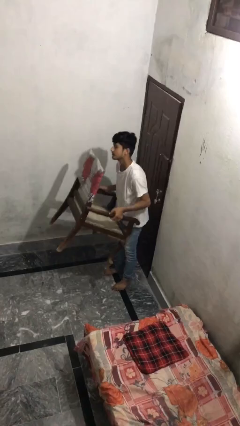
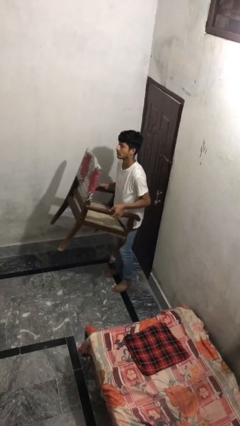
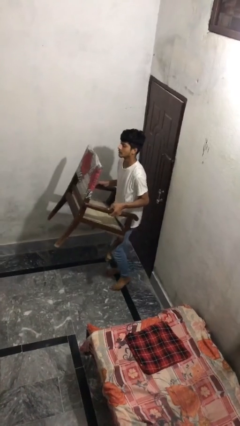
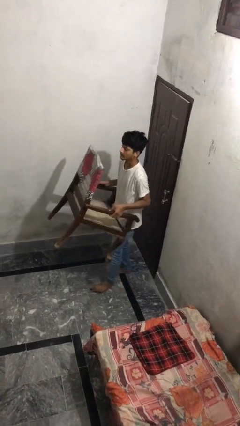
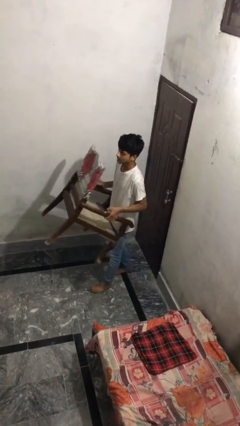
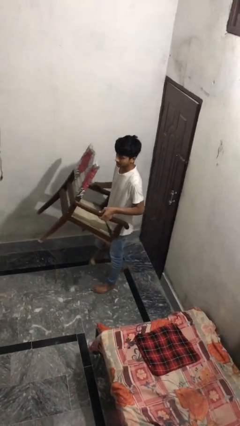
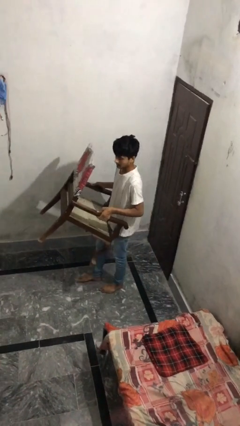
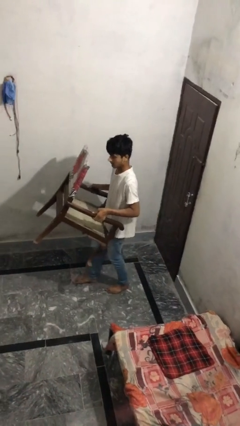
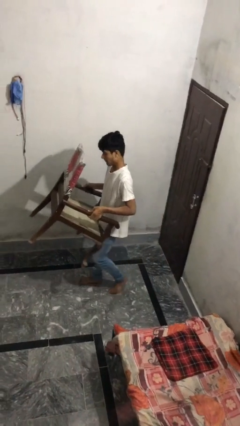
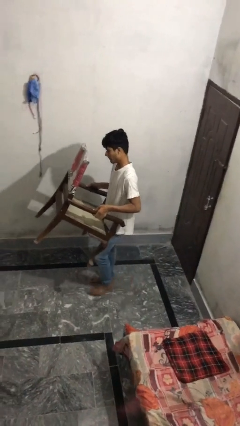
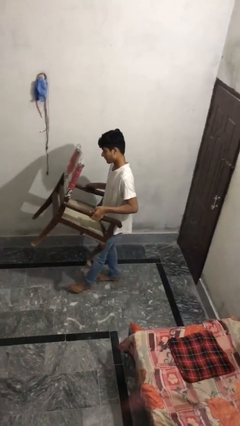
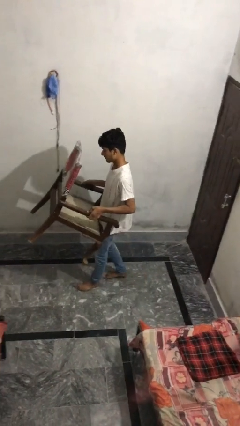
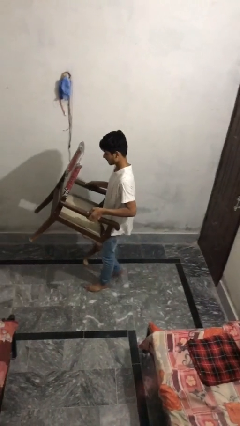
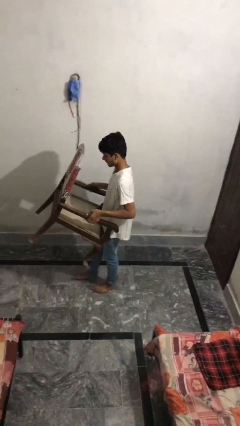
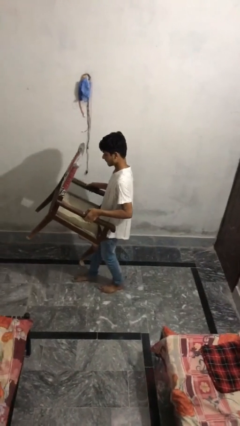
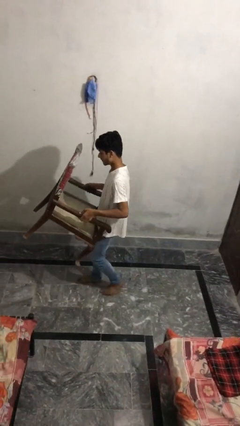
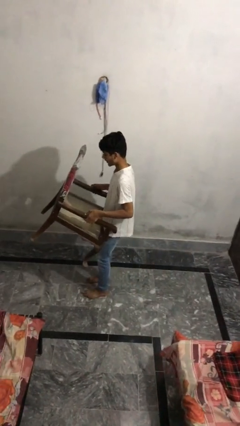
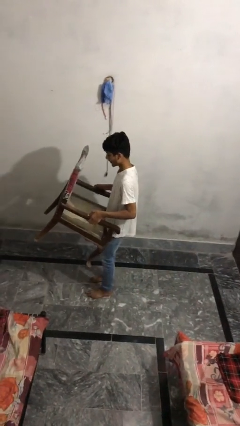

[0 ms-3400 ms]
person carries heavy object

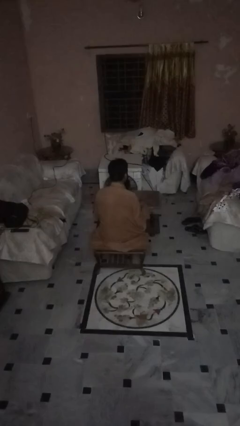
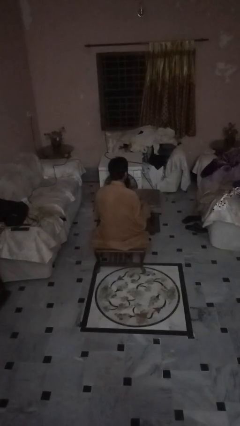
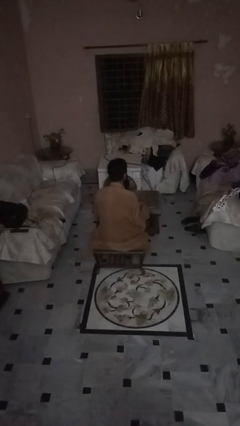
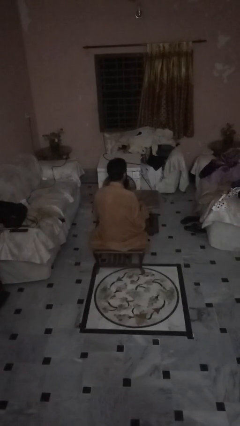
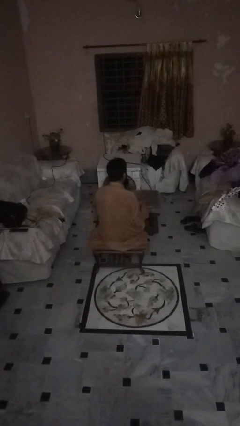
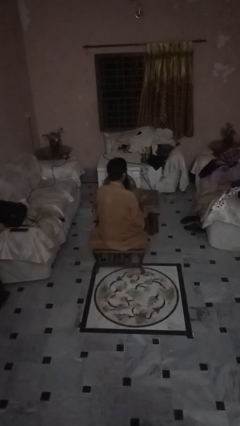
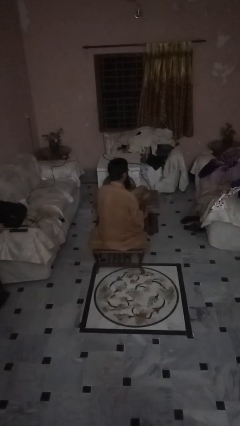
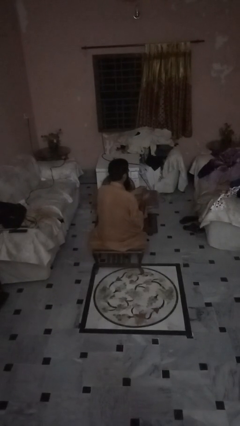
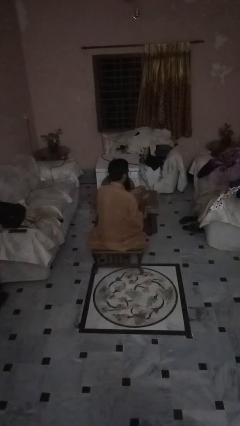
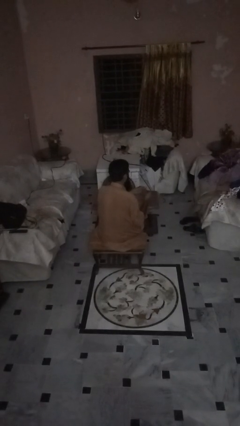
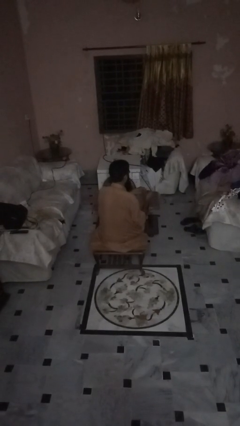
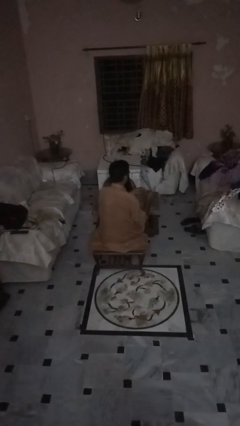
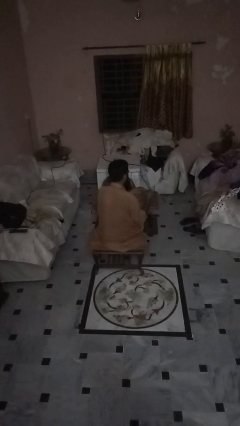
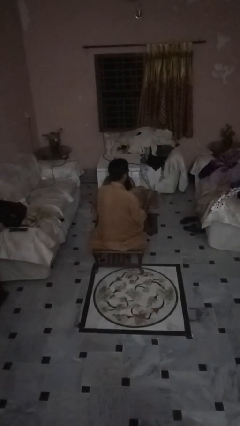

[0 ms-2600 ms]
person files fingernails

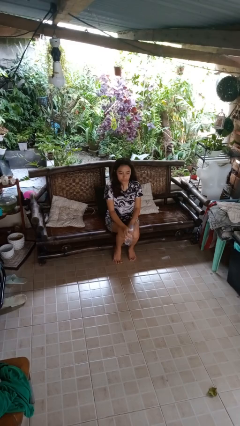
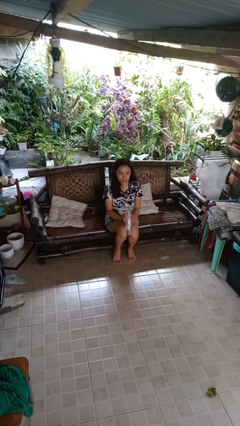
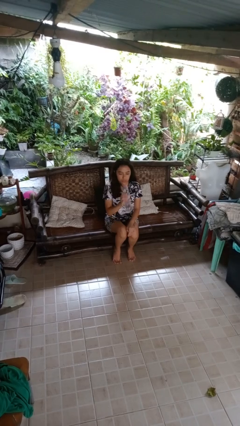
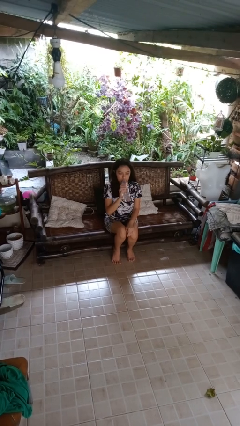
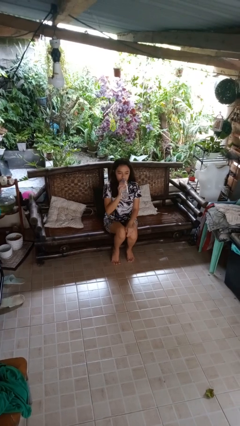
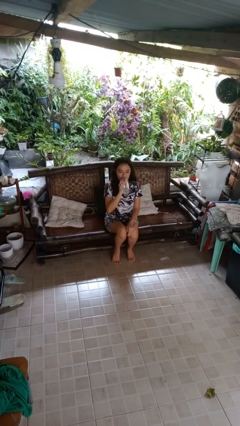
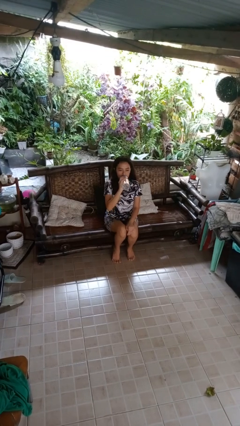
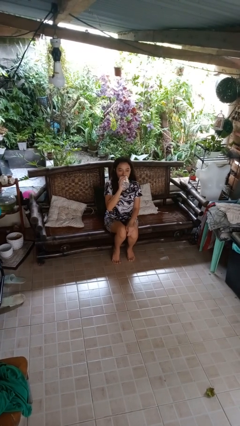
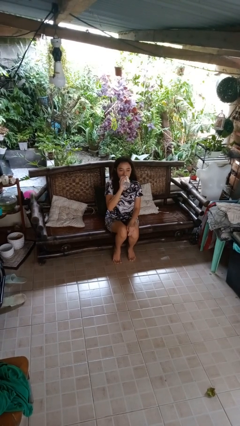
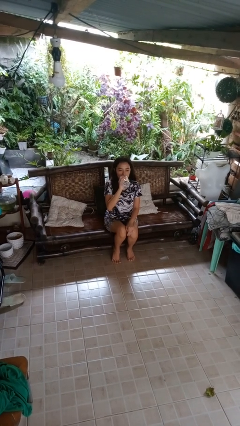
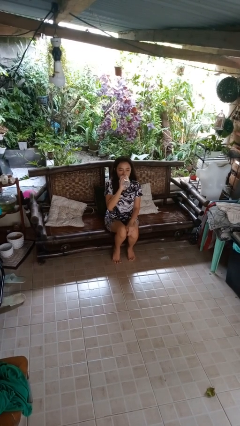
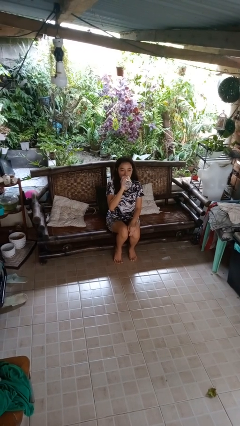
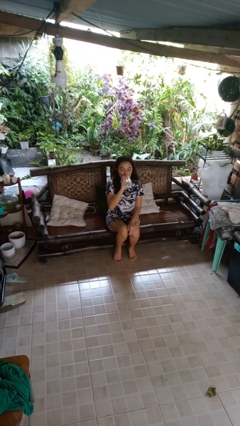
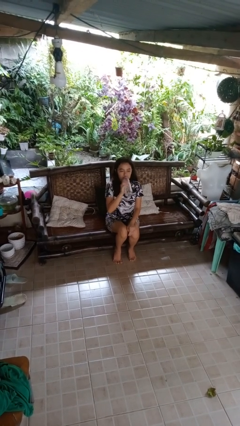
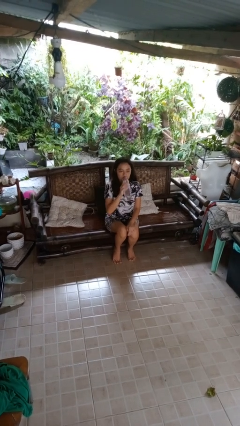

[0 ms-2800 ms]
person drinks from bottle

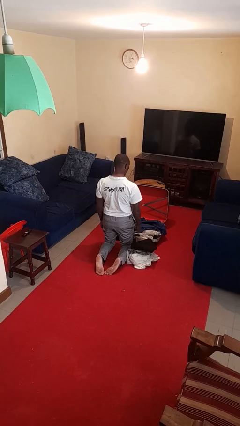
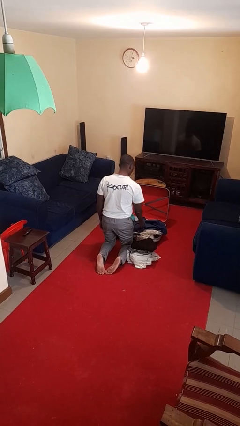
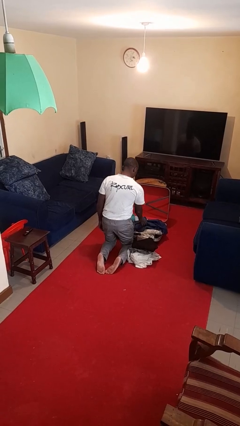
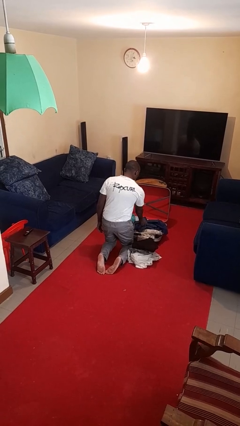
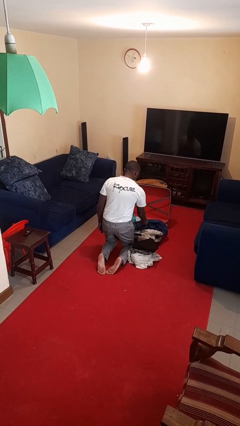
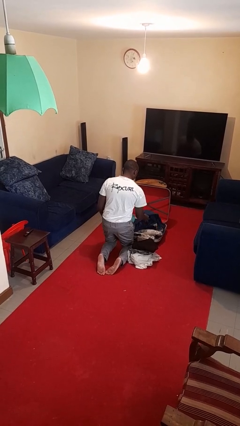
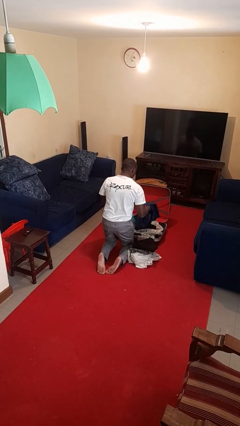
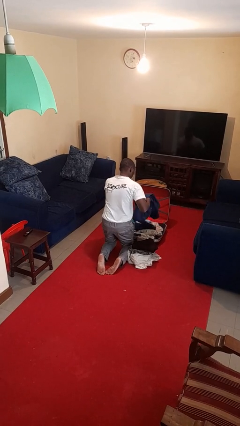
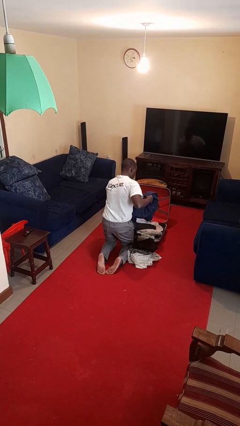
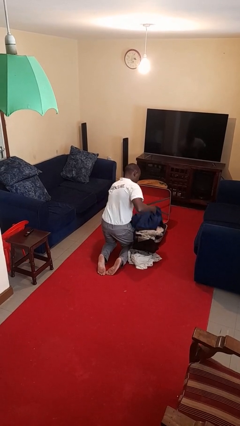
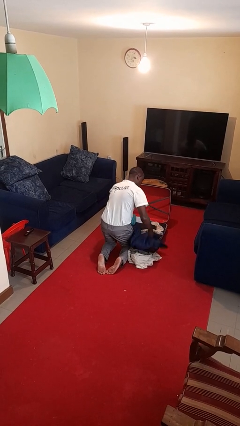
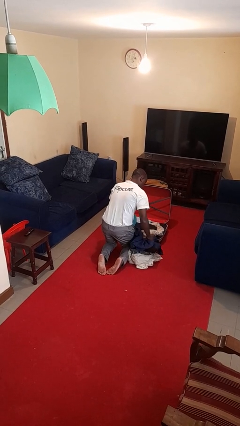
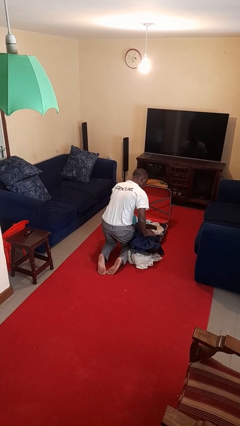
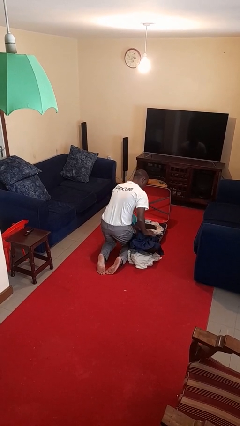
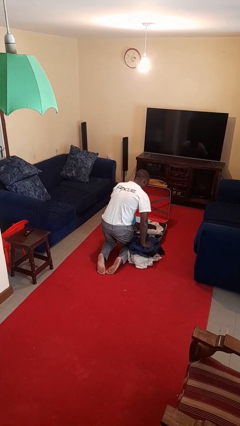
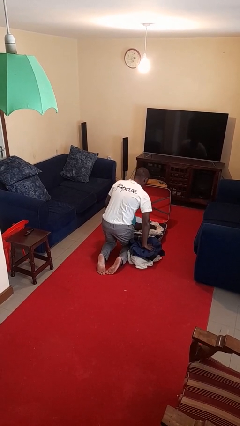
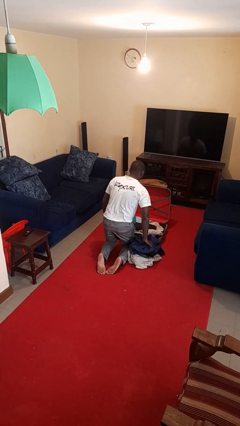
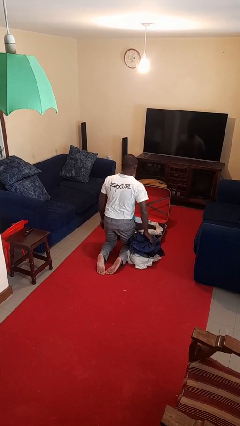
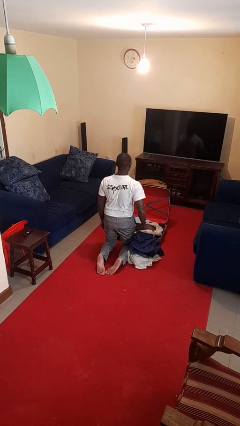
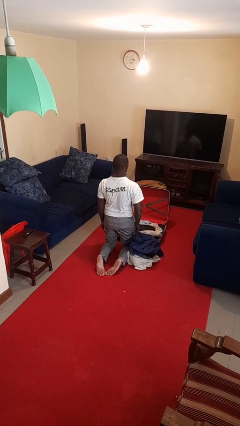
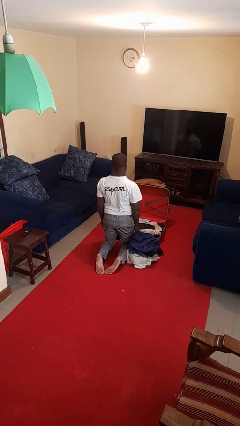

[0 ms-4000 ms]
person unloads clothes from suitcase

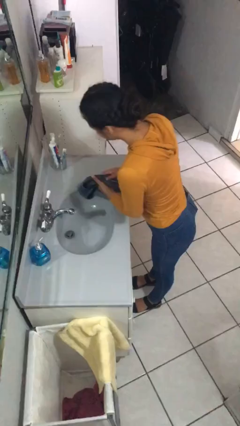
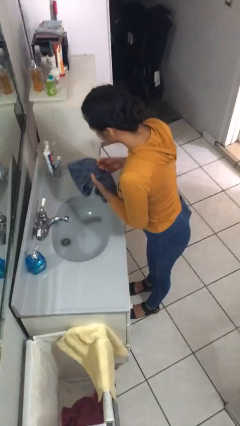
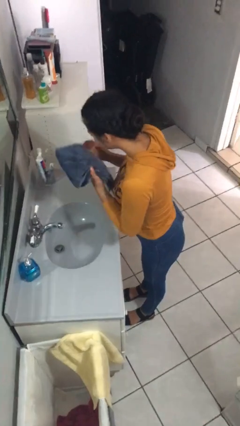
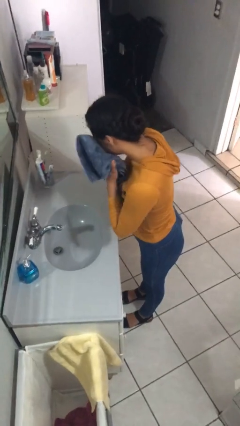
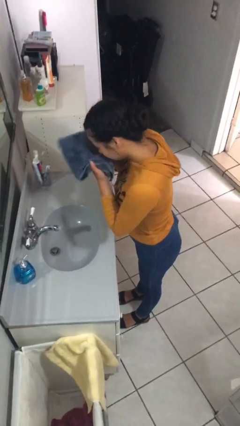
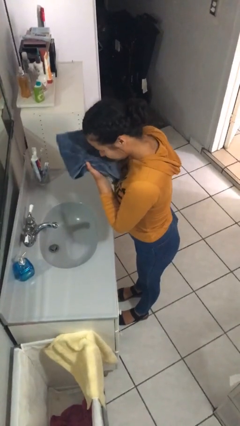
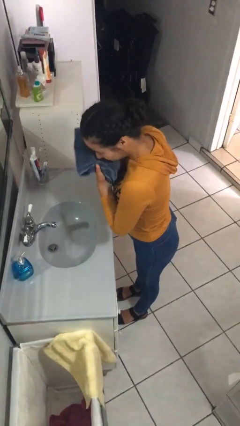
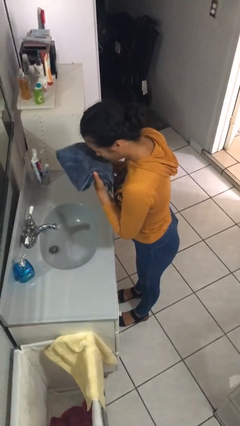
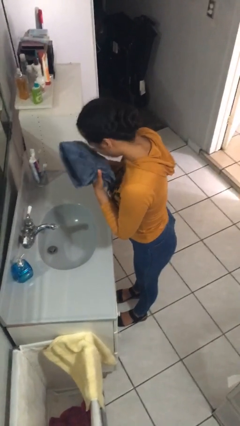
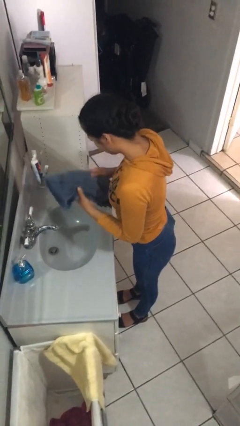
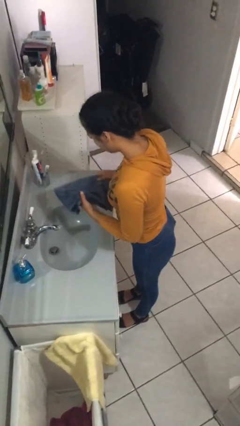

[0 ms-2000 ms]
person dries face with towel

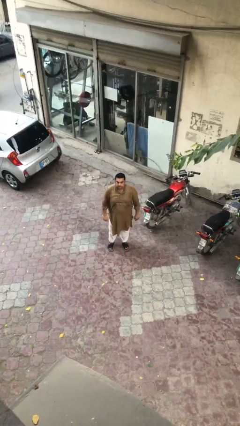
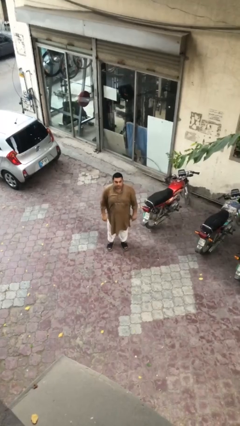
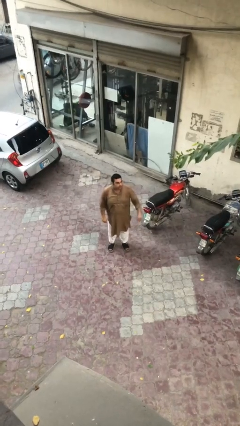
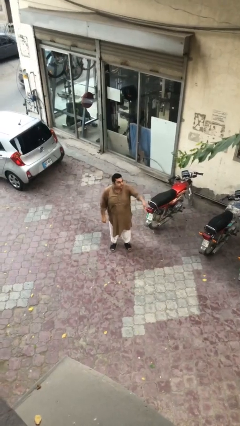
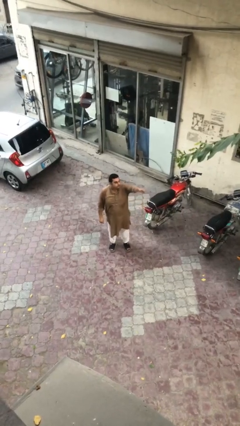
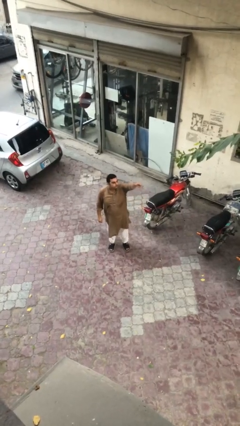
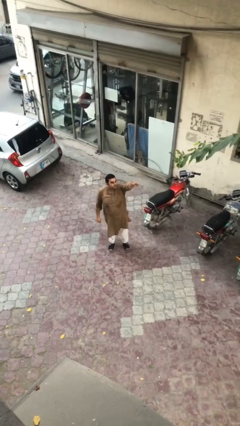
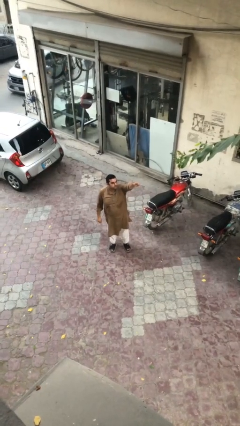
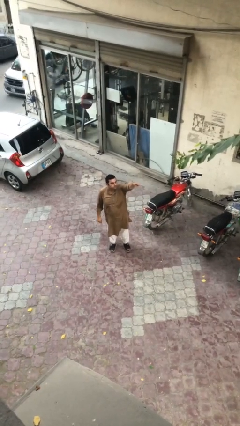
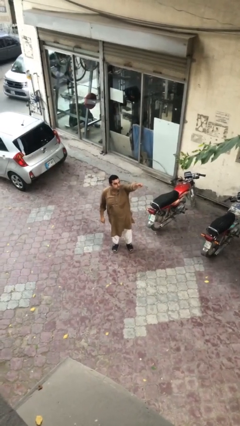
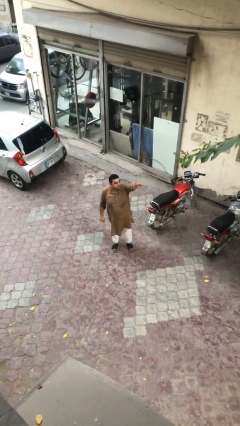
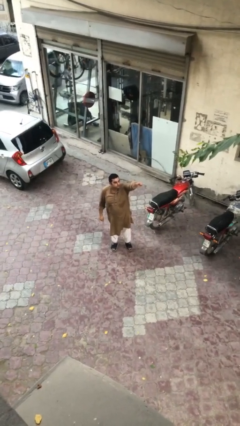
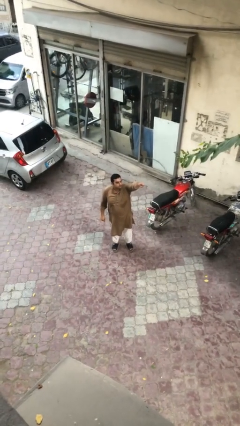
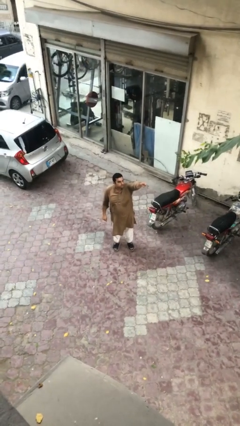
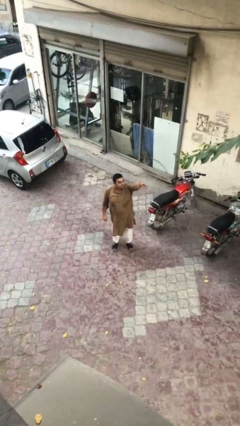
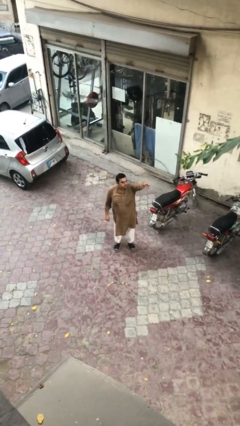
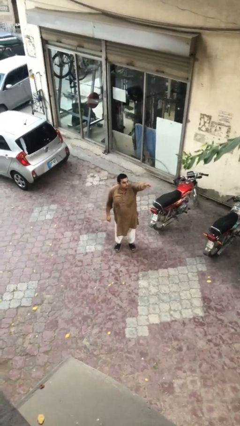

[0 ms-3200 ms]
person points at person
